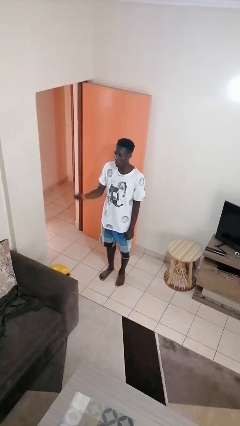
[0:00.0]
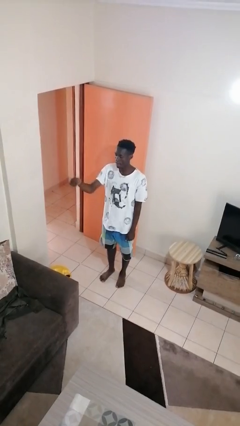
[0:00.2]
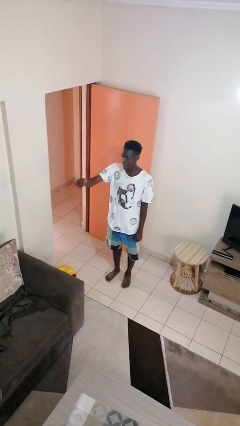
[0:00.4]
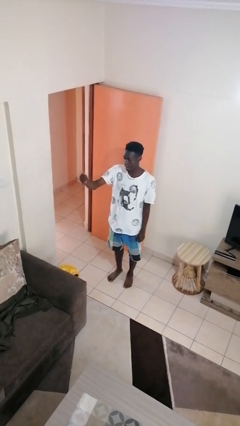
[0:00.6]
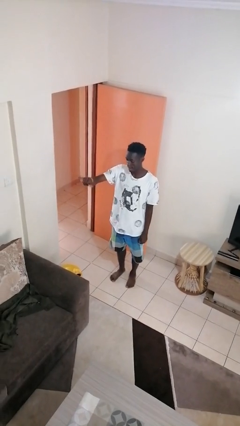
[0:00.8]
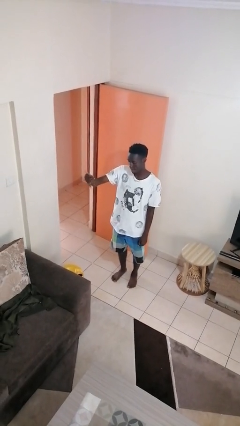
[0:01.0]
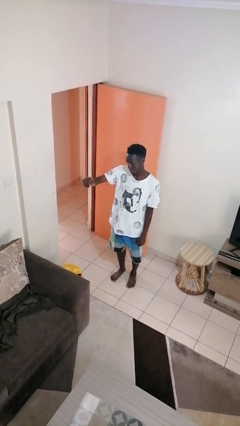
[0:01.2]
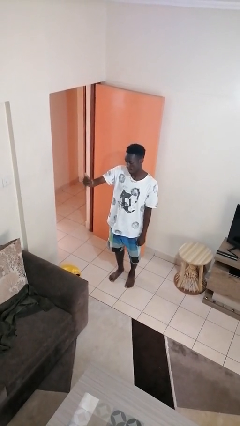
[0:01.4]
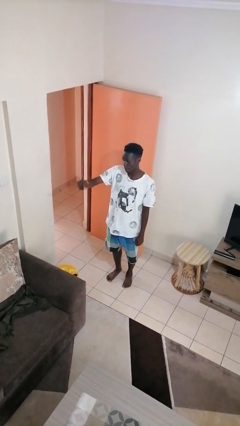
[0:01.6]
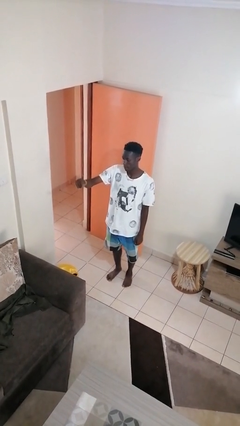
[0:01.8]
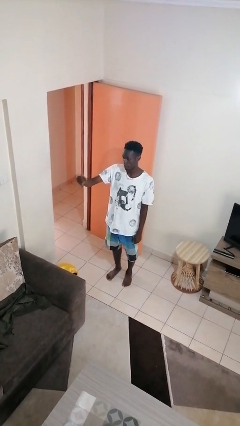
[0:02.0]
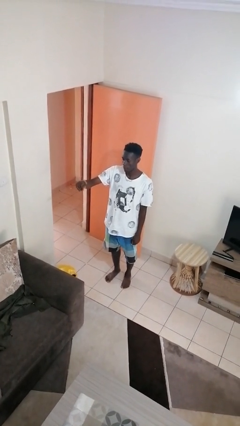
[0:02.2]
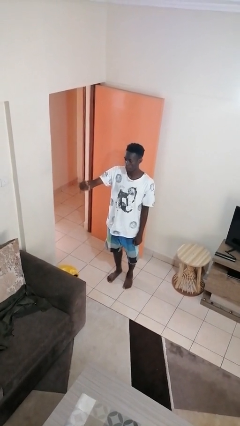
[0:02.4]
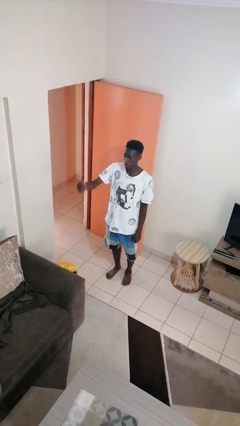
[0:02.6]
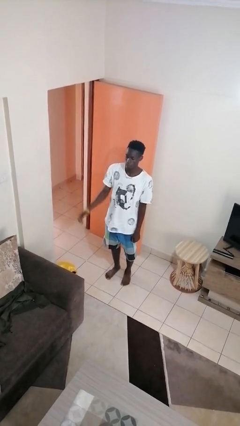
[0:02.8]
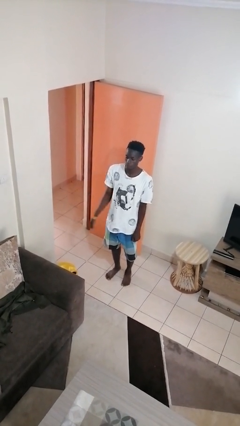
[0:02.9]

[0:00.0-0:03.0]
person gestures hang loose

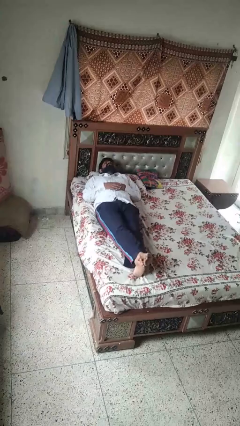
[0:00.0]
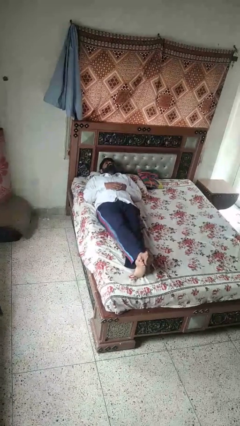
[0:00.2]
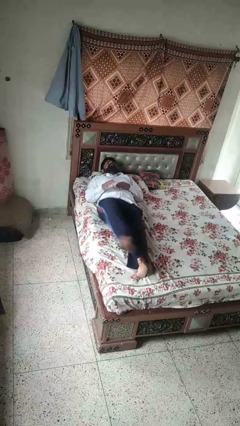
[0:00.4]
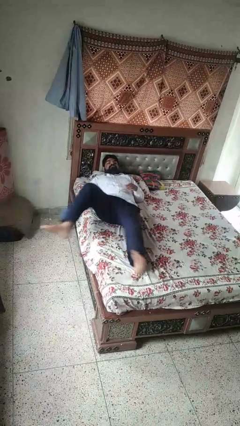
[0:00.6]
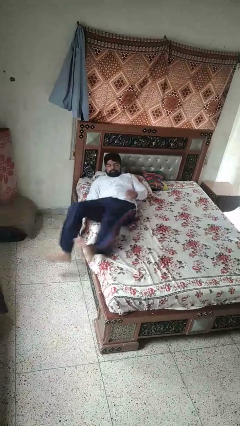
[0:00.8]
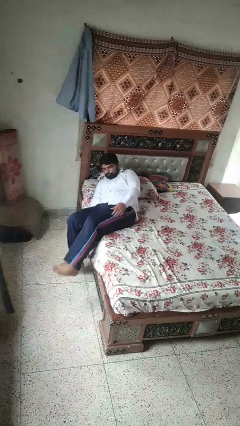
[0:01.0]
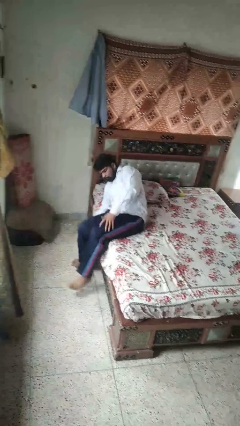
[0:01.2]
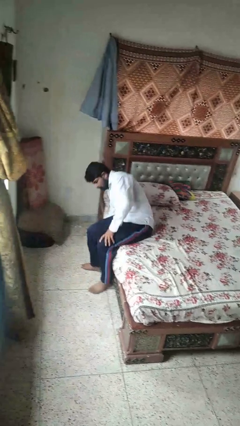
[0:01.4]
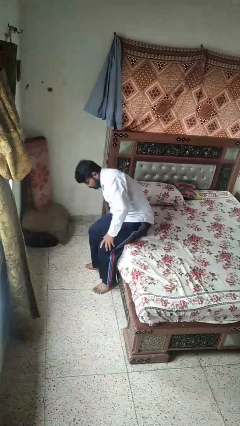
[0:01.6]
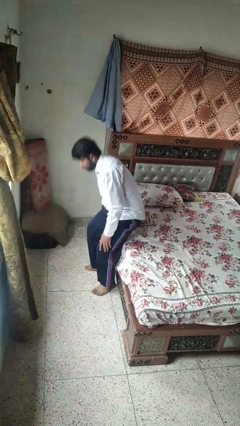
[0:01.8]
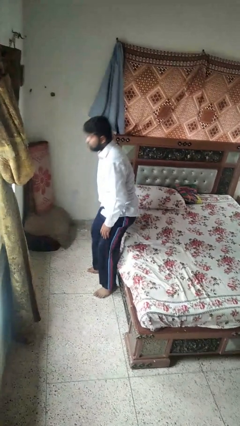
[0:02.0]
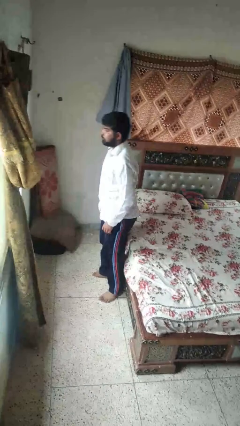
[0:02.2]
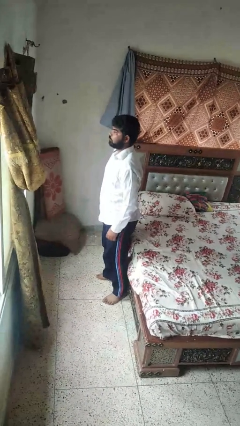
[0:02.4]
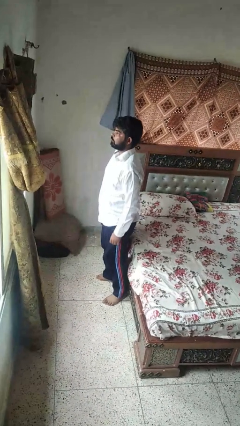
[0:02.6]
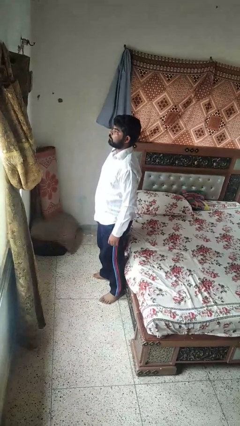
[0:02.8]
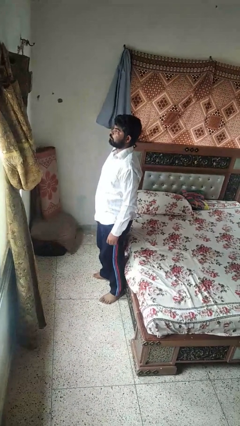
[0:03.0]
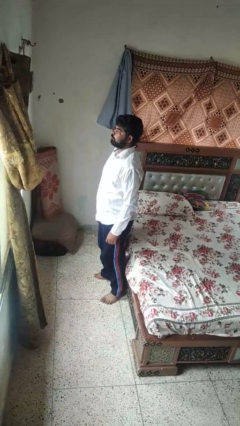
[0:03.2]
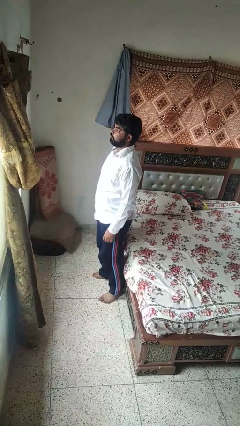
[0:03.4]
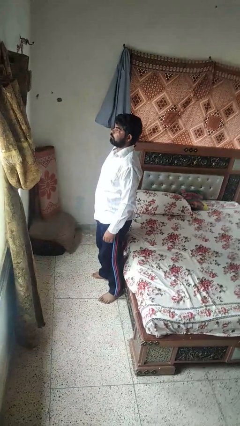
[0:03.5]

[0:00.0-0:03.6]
person stands up

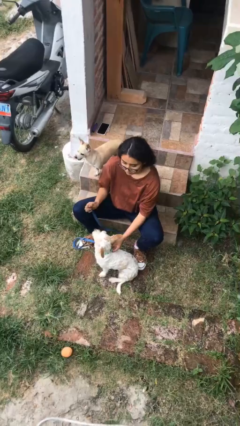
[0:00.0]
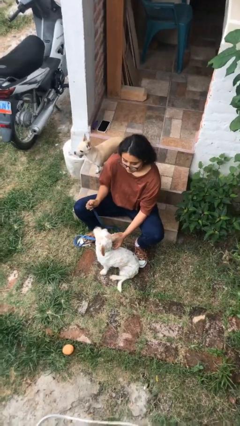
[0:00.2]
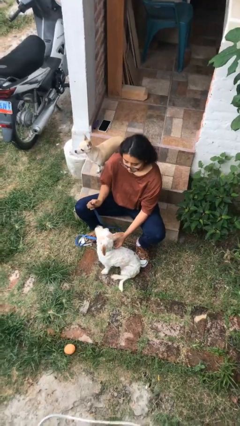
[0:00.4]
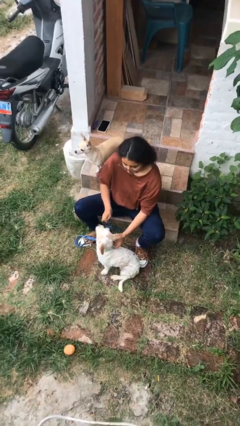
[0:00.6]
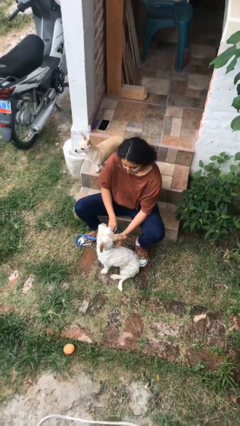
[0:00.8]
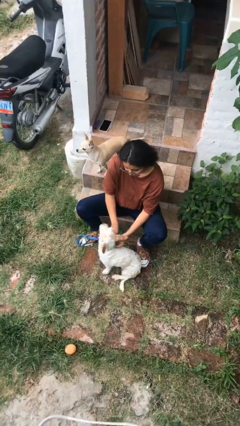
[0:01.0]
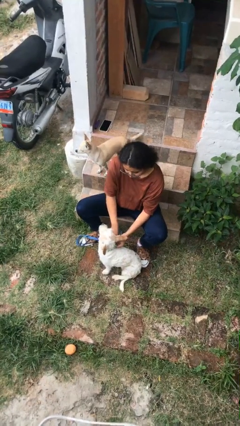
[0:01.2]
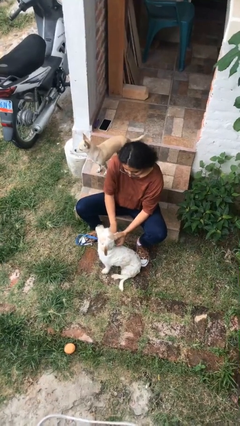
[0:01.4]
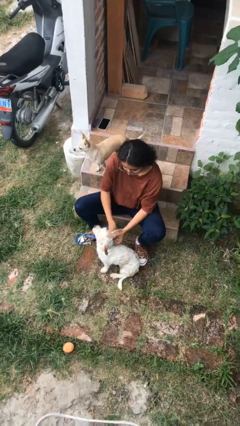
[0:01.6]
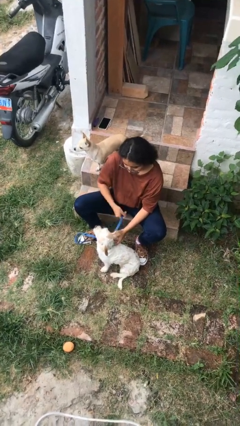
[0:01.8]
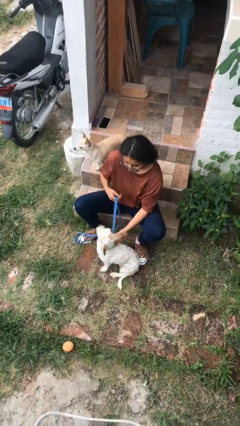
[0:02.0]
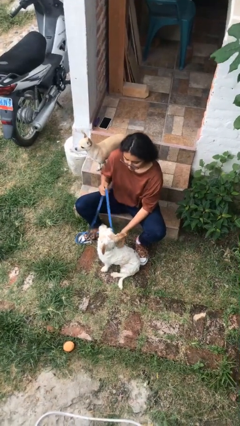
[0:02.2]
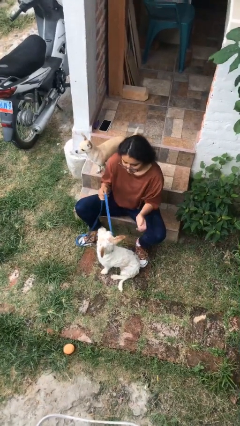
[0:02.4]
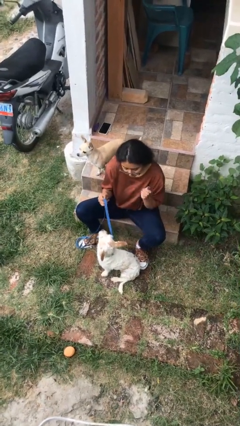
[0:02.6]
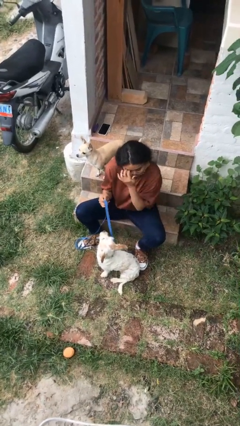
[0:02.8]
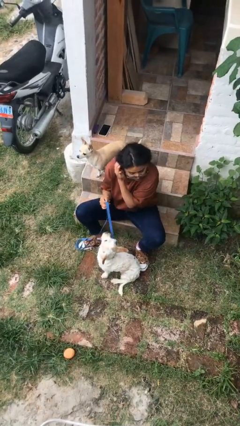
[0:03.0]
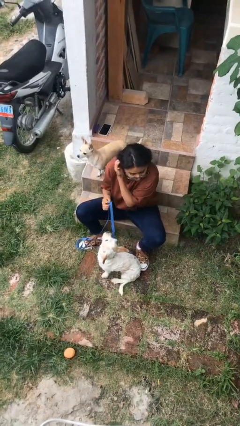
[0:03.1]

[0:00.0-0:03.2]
person attaches leash to dog

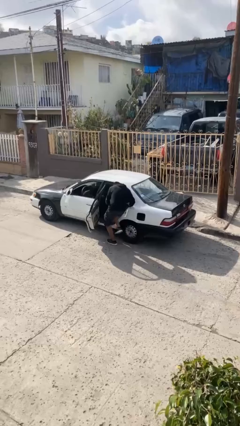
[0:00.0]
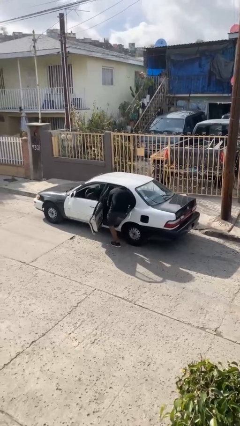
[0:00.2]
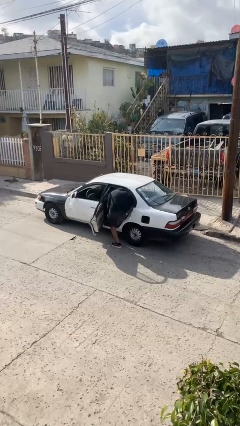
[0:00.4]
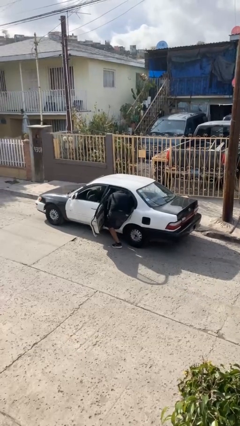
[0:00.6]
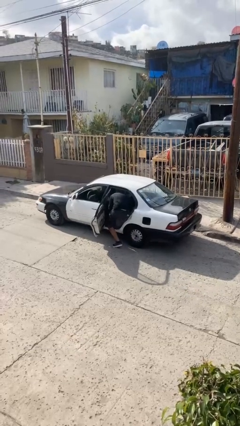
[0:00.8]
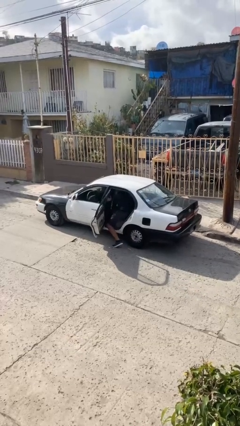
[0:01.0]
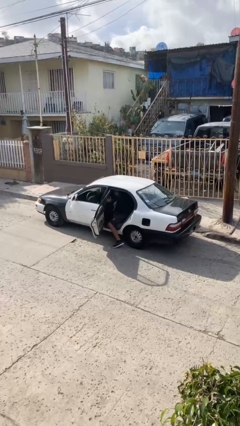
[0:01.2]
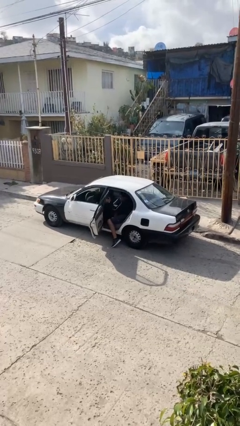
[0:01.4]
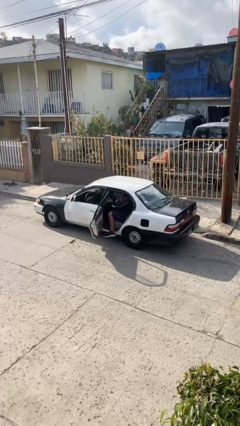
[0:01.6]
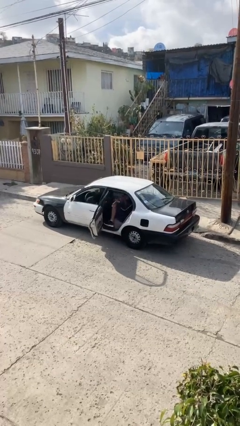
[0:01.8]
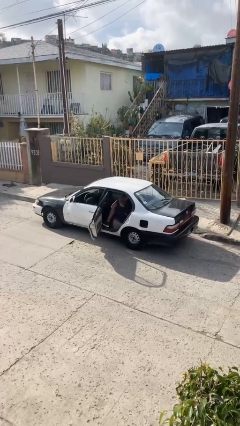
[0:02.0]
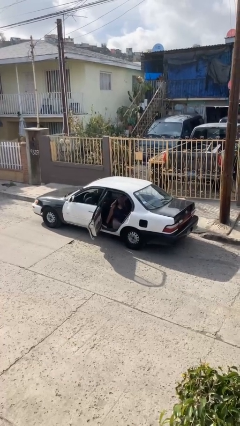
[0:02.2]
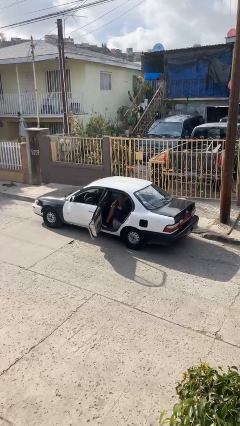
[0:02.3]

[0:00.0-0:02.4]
person enters car

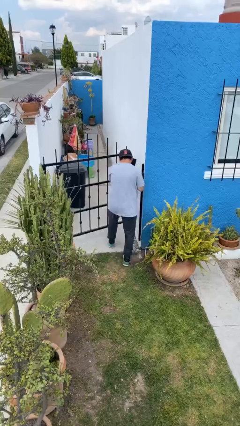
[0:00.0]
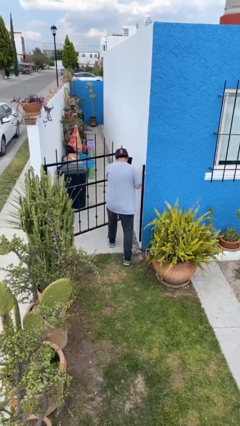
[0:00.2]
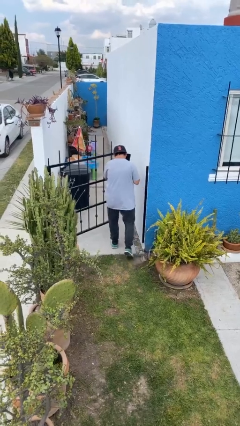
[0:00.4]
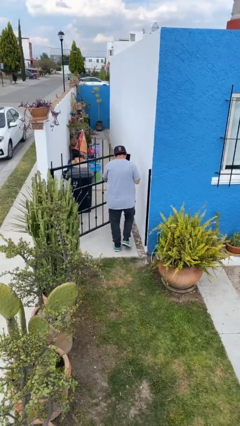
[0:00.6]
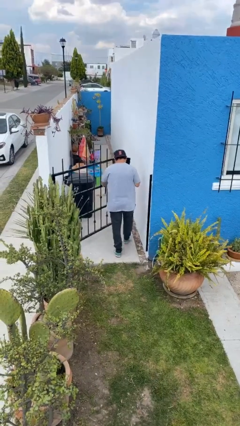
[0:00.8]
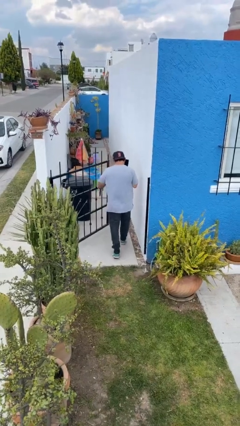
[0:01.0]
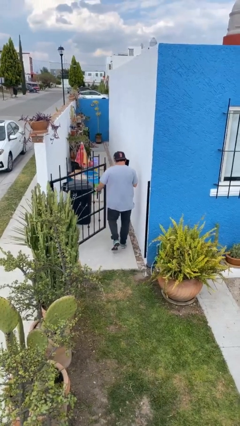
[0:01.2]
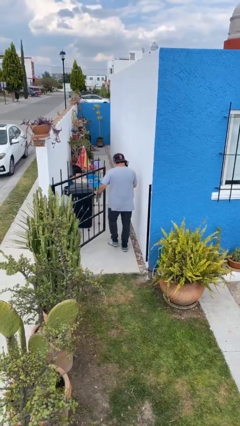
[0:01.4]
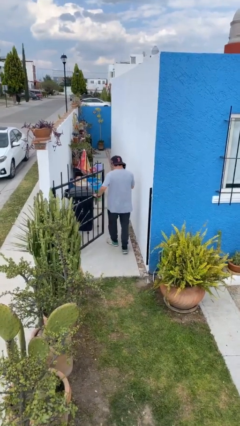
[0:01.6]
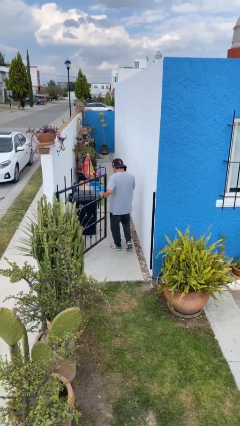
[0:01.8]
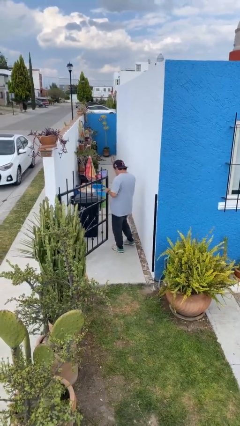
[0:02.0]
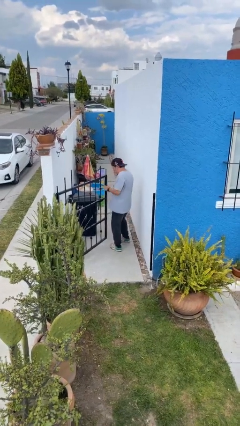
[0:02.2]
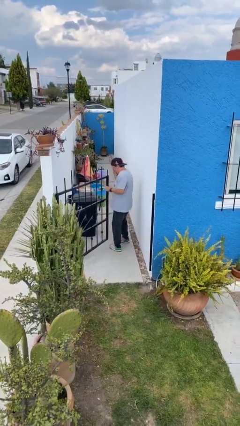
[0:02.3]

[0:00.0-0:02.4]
person exits scene through structure

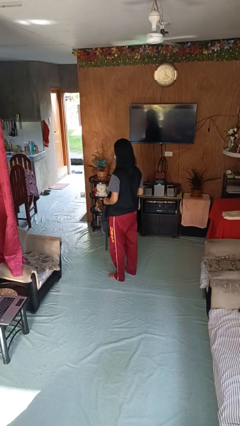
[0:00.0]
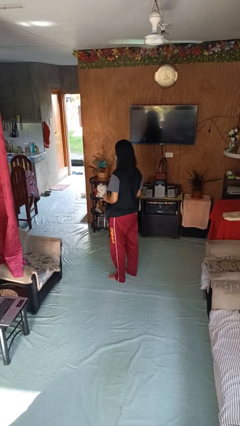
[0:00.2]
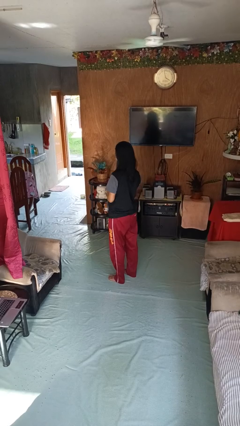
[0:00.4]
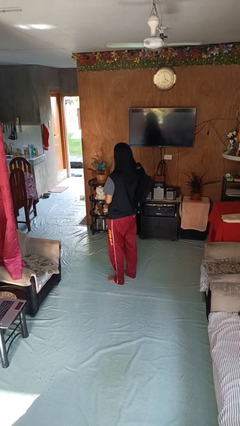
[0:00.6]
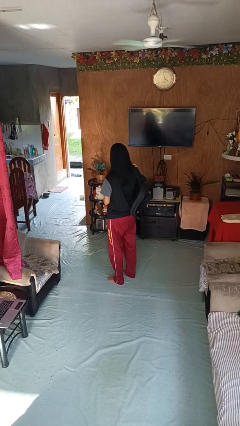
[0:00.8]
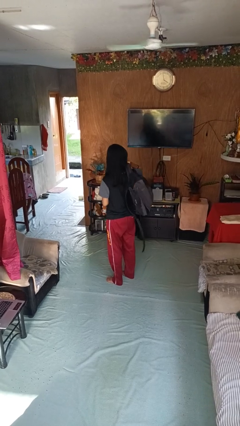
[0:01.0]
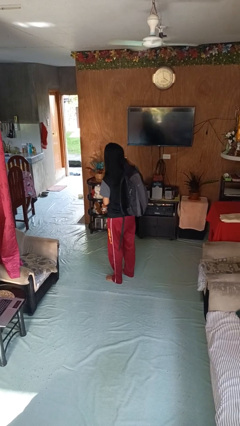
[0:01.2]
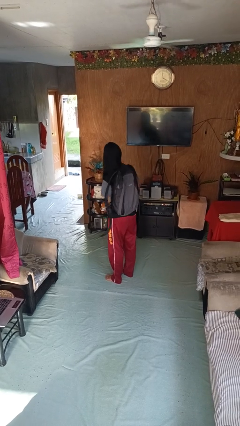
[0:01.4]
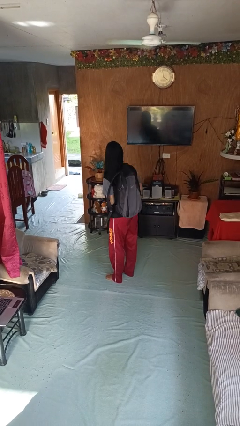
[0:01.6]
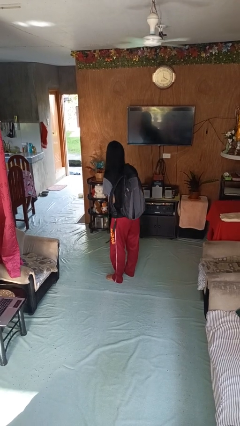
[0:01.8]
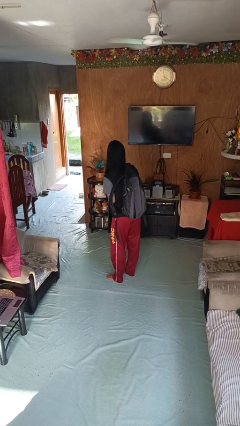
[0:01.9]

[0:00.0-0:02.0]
person puts on backpack

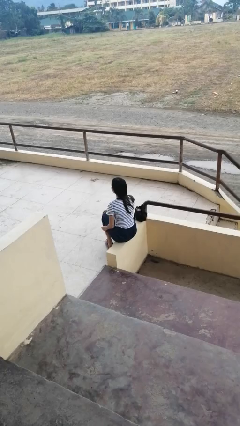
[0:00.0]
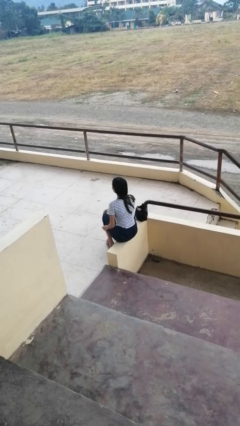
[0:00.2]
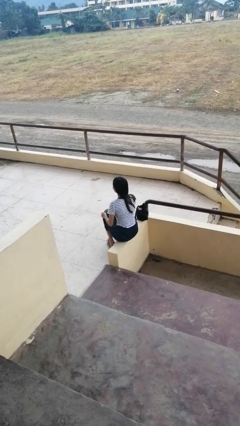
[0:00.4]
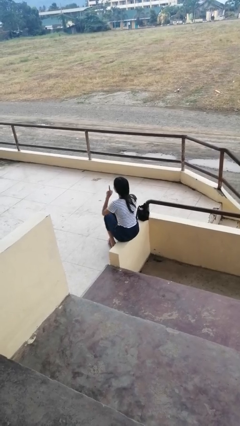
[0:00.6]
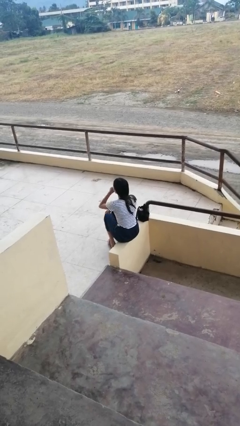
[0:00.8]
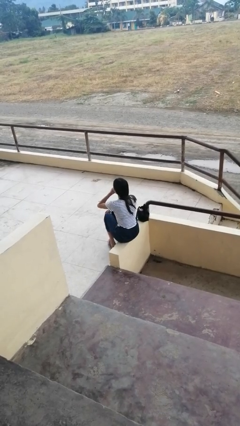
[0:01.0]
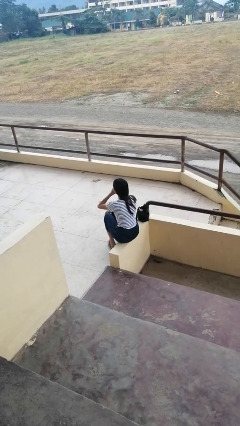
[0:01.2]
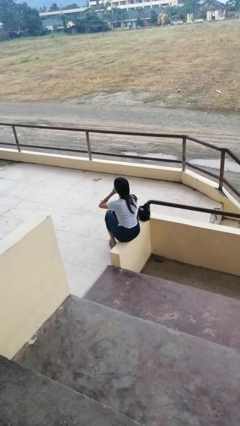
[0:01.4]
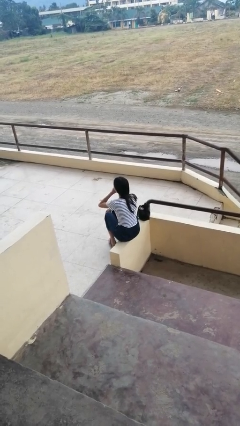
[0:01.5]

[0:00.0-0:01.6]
person gestures be quiet
